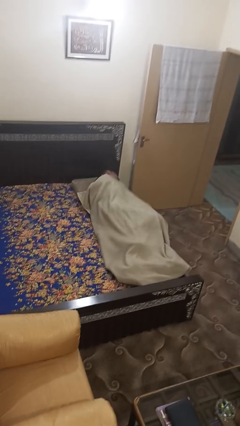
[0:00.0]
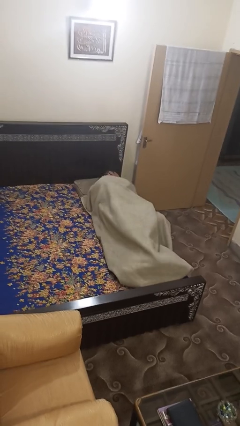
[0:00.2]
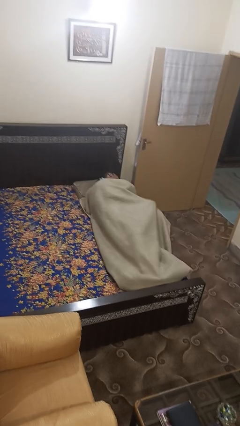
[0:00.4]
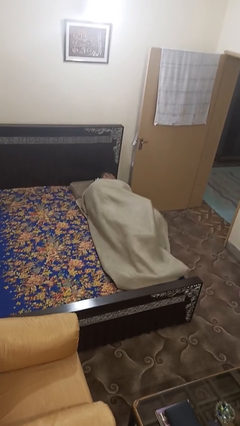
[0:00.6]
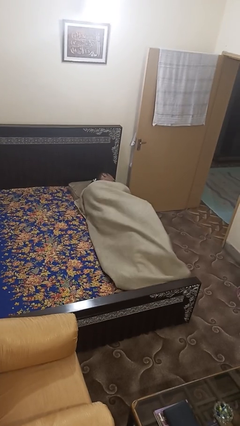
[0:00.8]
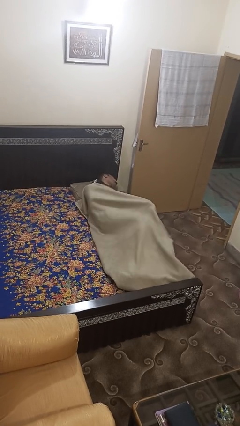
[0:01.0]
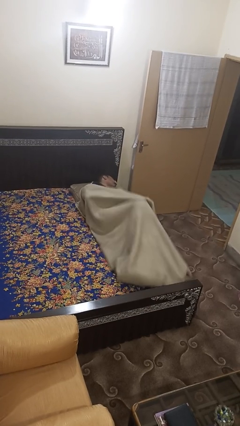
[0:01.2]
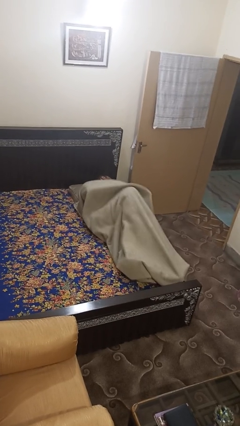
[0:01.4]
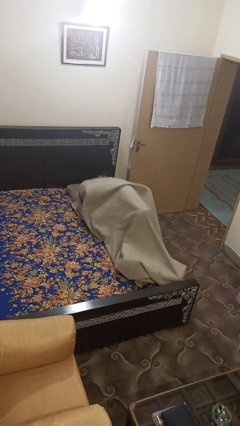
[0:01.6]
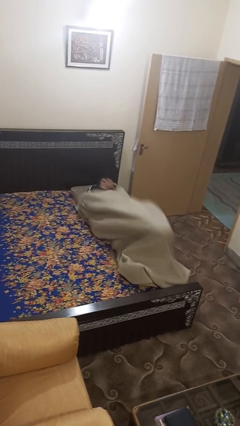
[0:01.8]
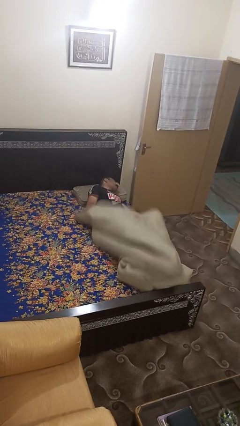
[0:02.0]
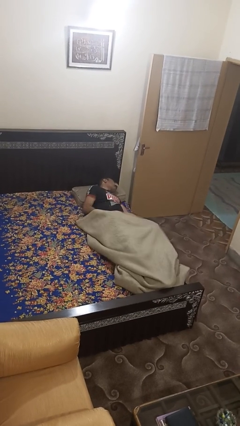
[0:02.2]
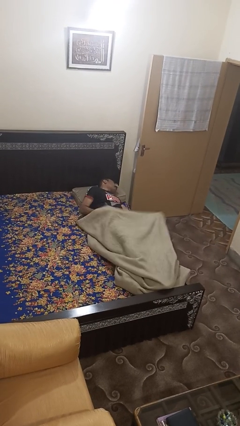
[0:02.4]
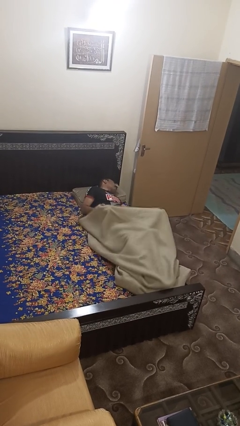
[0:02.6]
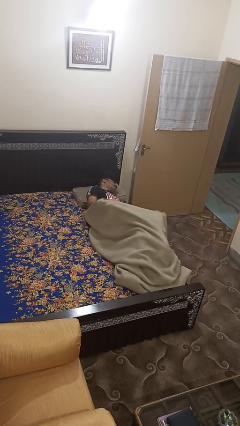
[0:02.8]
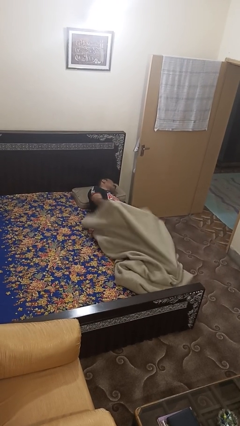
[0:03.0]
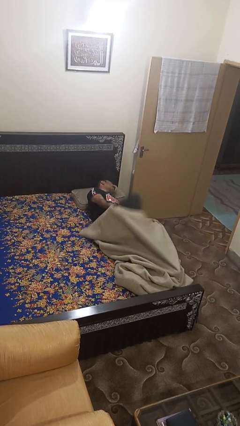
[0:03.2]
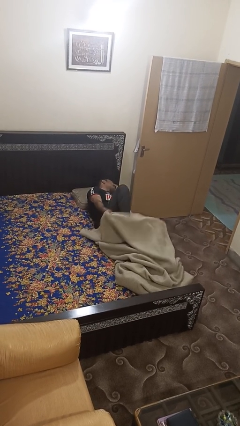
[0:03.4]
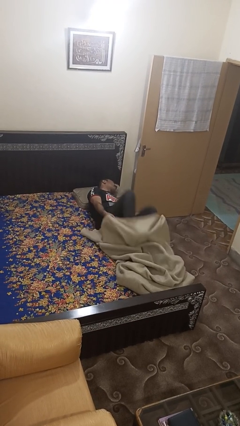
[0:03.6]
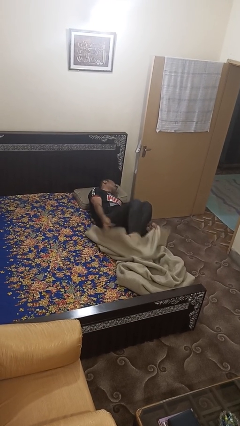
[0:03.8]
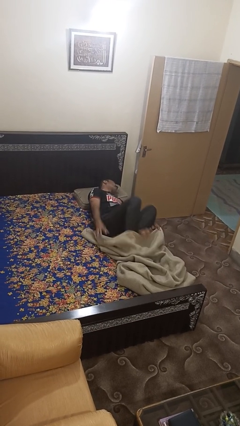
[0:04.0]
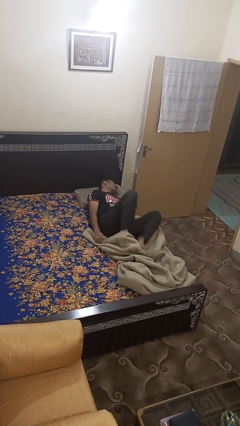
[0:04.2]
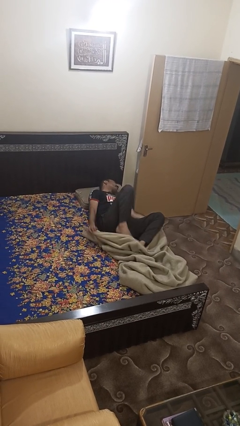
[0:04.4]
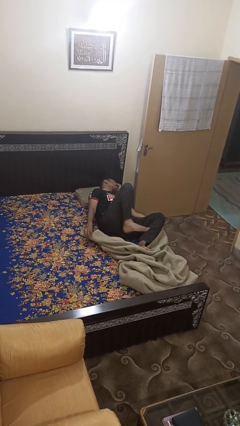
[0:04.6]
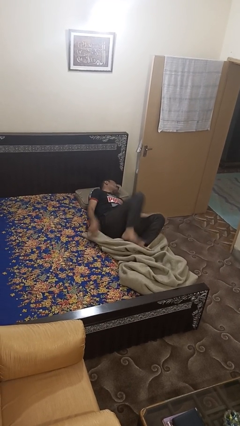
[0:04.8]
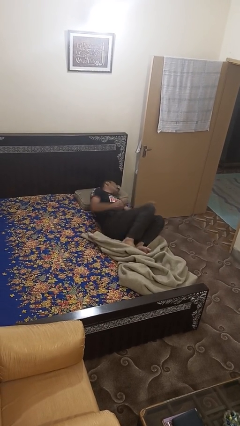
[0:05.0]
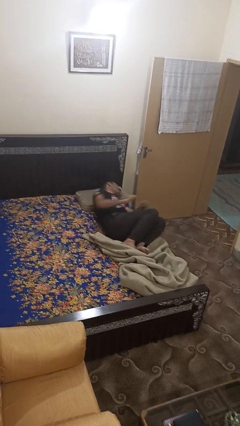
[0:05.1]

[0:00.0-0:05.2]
person uncovers with bedsheets

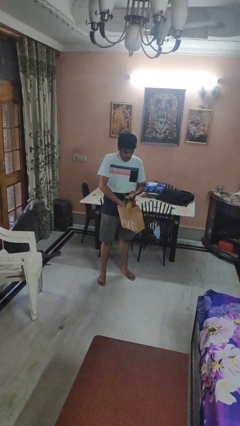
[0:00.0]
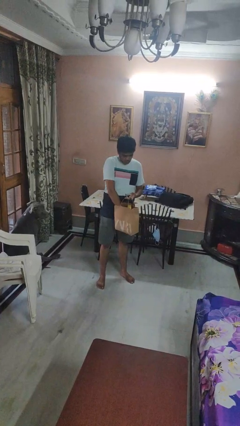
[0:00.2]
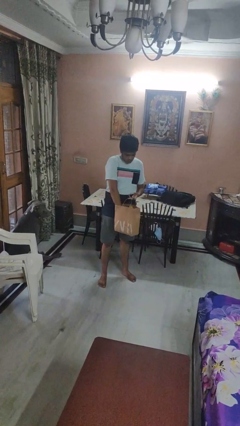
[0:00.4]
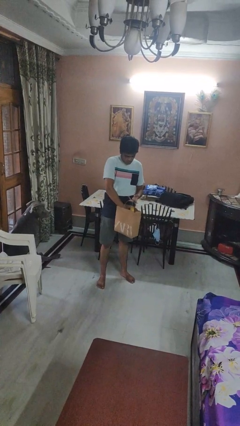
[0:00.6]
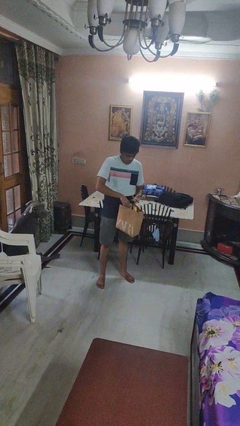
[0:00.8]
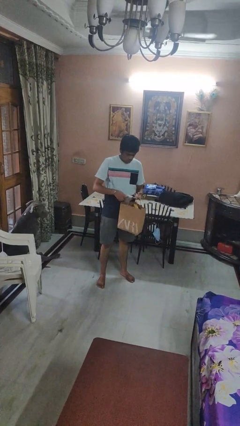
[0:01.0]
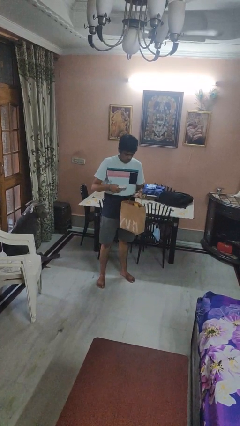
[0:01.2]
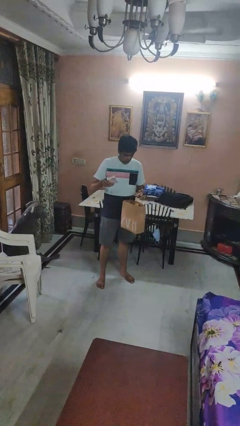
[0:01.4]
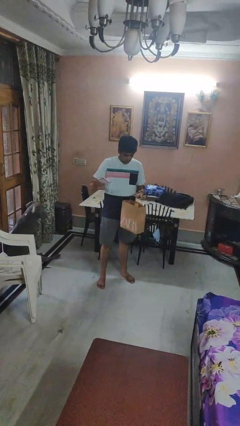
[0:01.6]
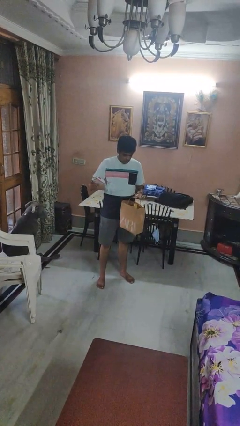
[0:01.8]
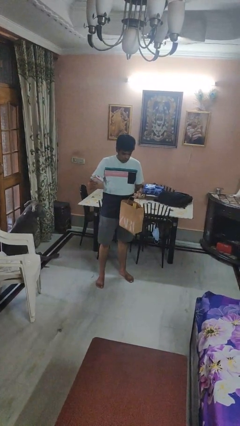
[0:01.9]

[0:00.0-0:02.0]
person takes object from bag

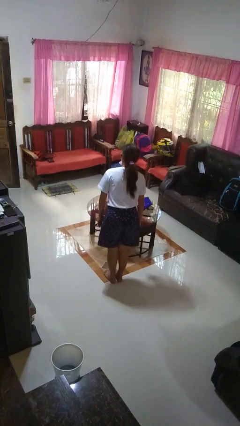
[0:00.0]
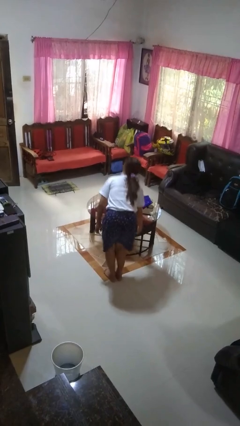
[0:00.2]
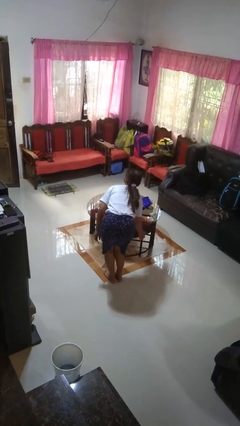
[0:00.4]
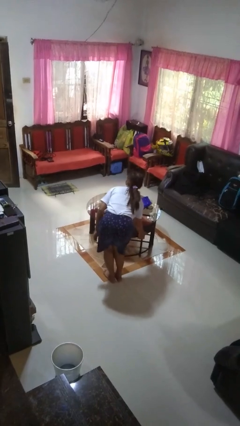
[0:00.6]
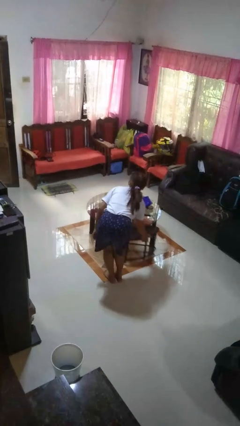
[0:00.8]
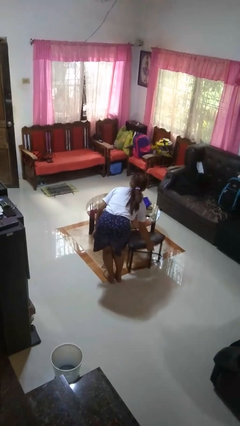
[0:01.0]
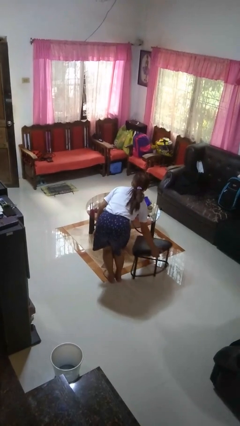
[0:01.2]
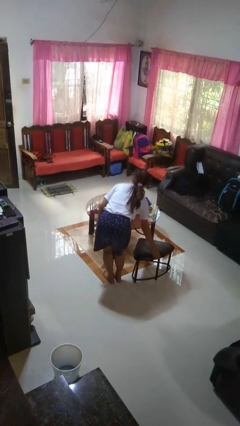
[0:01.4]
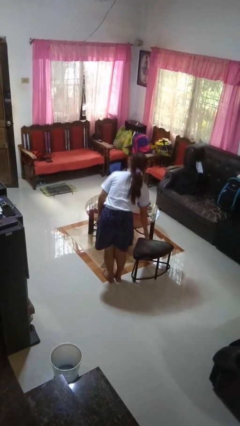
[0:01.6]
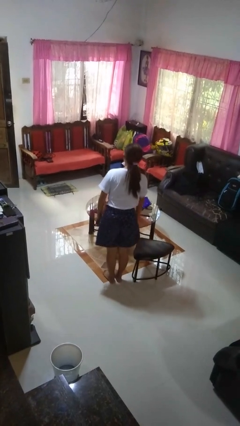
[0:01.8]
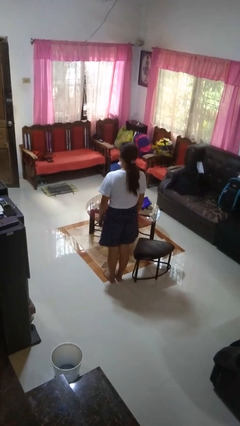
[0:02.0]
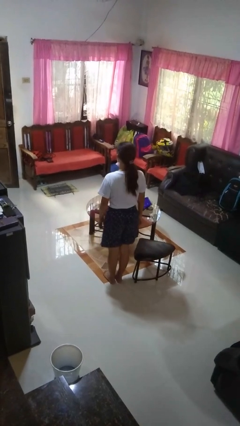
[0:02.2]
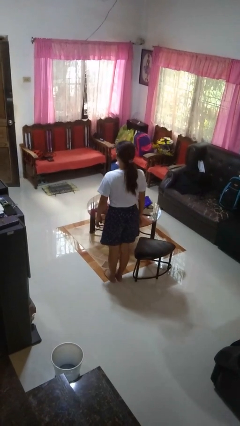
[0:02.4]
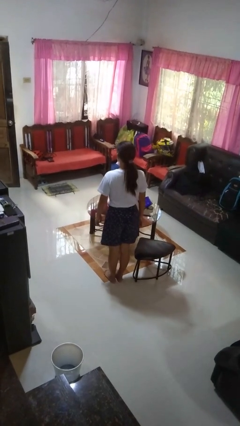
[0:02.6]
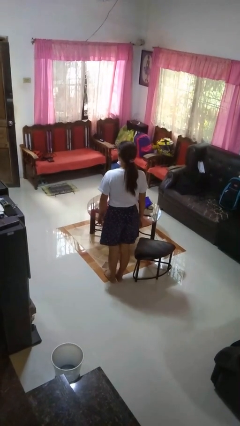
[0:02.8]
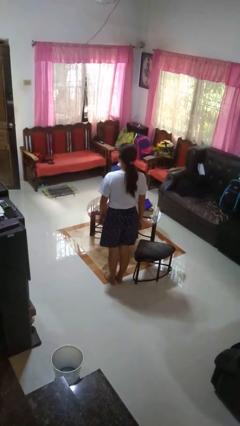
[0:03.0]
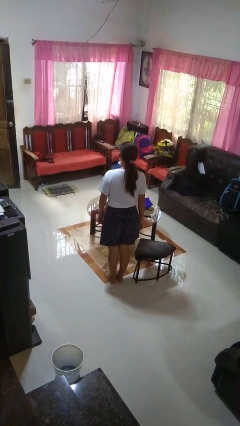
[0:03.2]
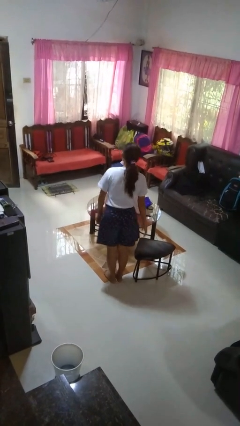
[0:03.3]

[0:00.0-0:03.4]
person pulls out chair

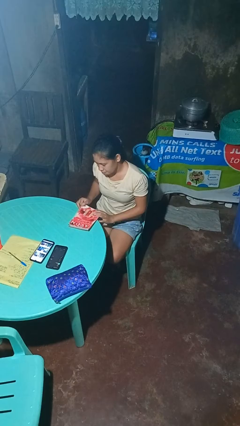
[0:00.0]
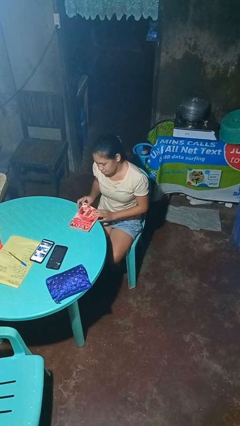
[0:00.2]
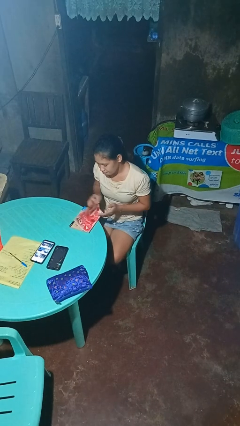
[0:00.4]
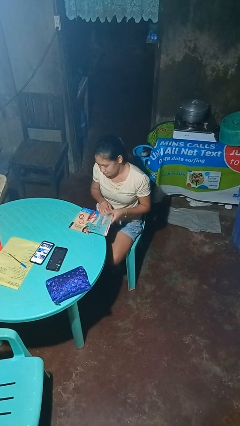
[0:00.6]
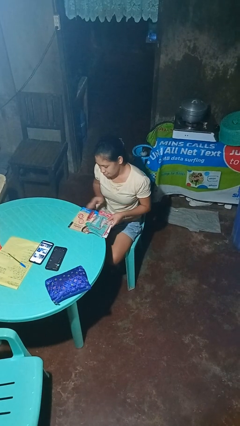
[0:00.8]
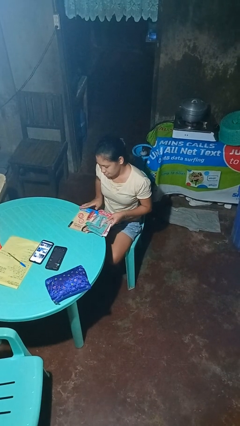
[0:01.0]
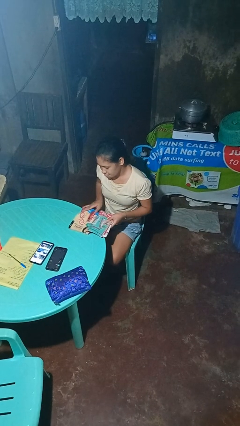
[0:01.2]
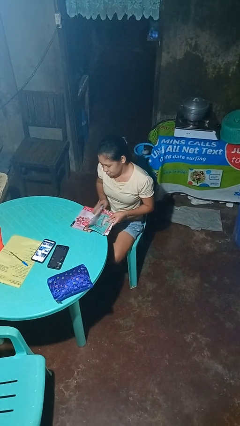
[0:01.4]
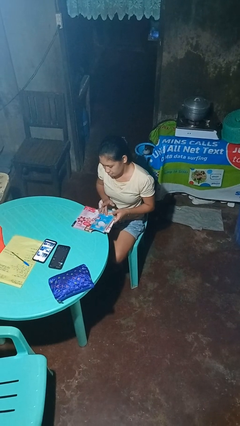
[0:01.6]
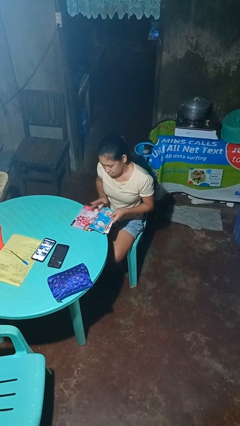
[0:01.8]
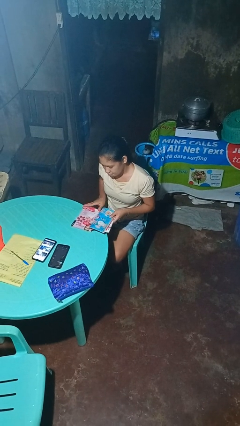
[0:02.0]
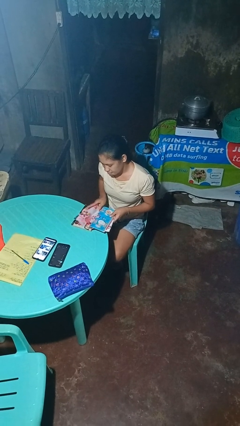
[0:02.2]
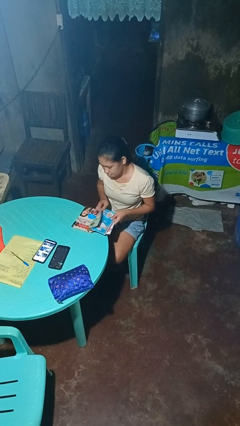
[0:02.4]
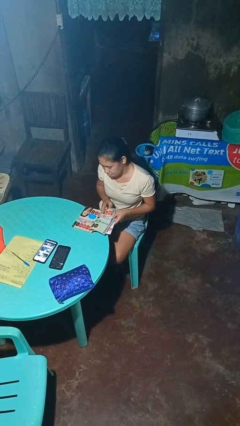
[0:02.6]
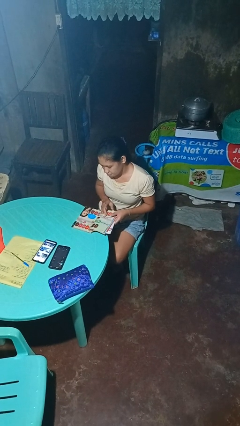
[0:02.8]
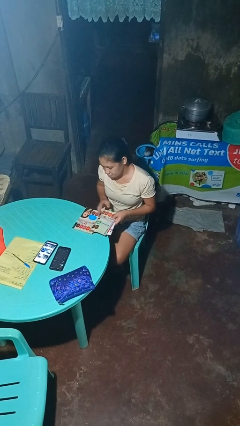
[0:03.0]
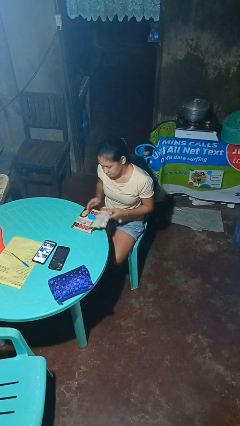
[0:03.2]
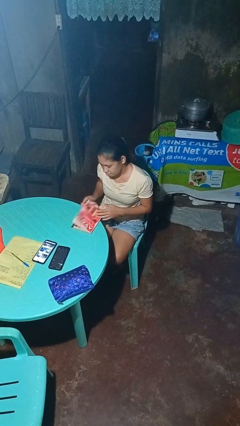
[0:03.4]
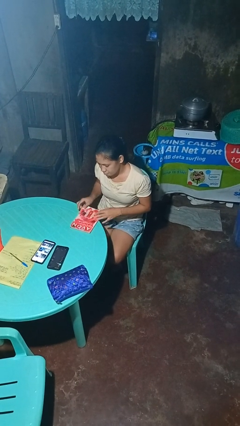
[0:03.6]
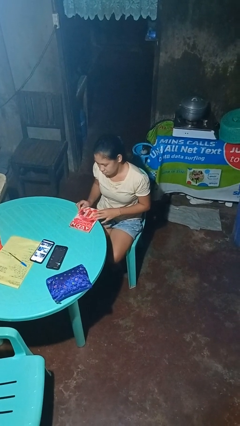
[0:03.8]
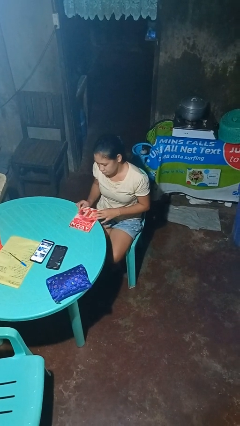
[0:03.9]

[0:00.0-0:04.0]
person reads magazine

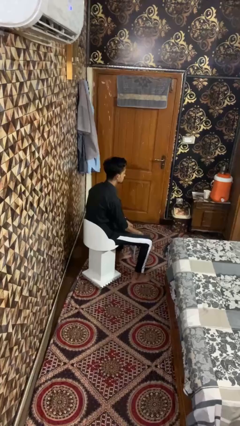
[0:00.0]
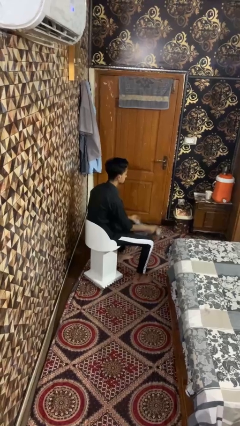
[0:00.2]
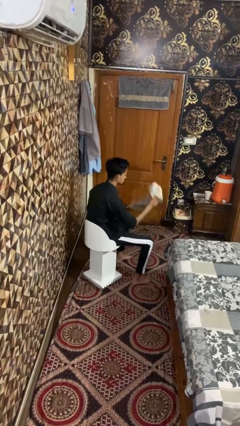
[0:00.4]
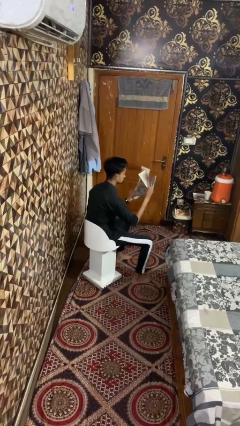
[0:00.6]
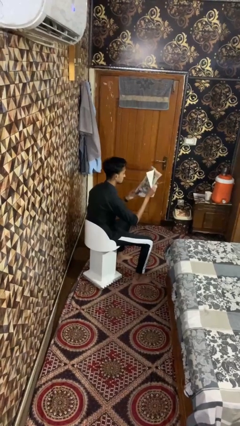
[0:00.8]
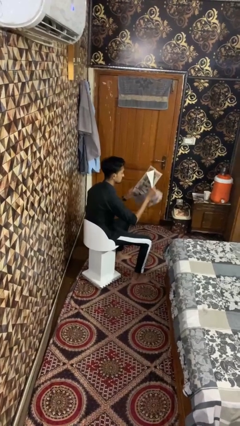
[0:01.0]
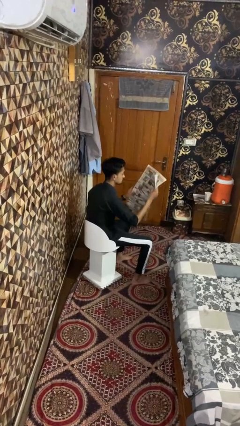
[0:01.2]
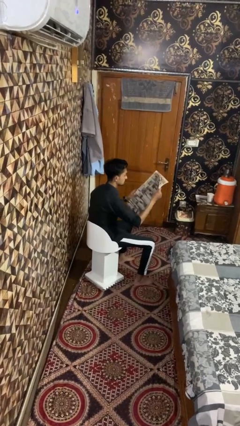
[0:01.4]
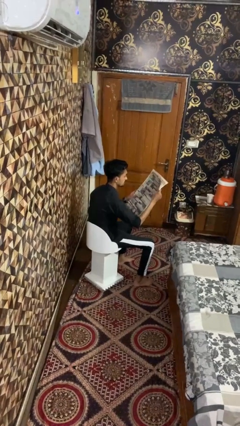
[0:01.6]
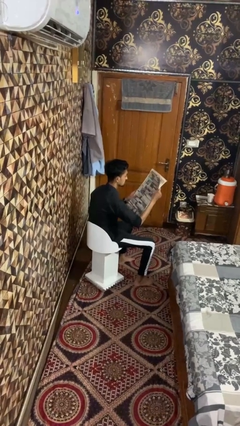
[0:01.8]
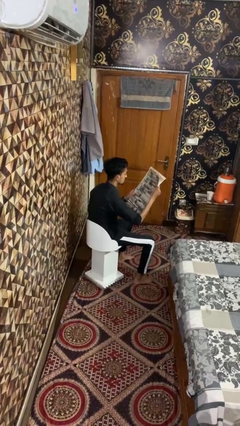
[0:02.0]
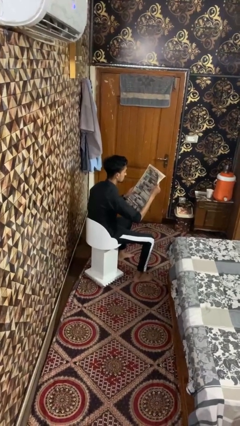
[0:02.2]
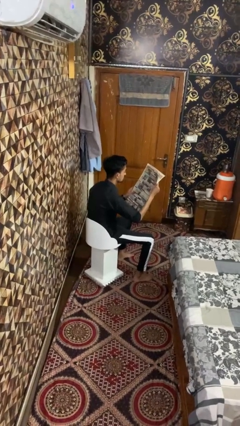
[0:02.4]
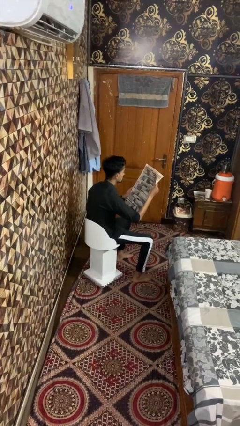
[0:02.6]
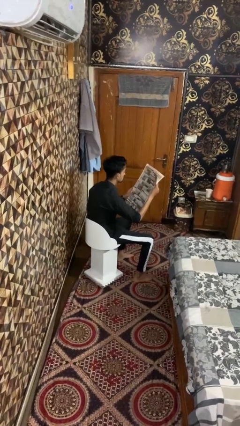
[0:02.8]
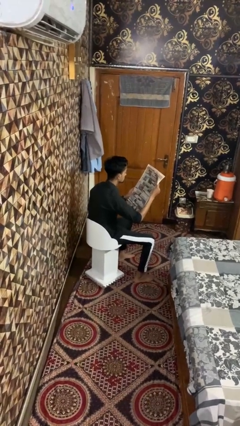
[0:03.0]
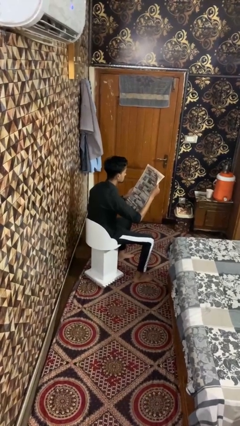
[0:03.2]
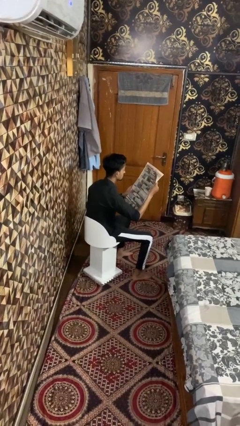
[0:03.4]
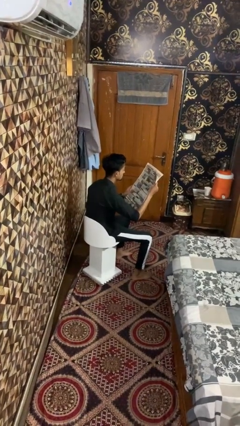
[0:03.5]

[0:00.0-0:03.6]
person reads newspaper
